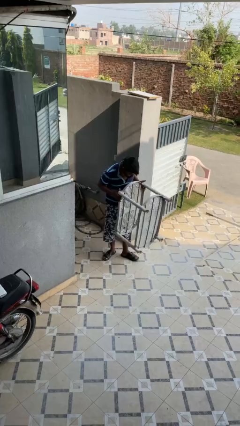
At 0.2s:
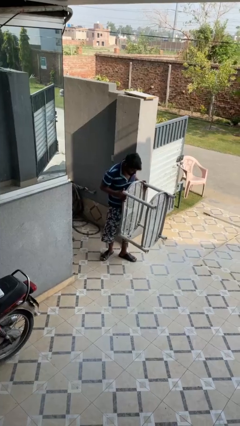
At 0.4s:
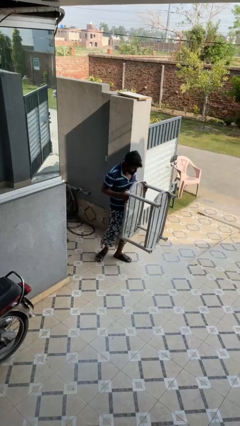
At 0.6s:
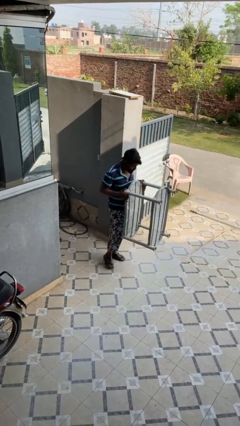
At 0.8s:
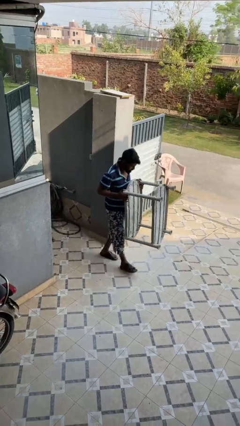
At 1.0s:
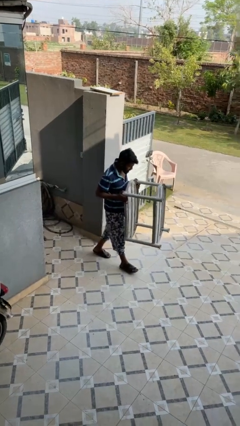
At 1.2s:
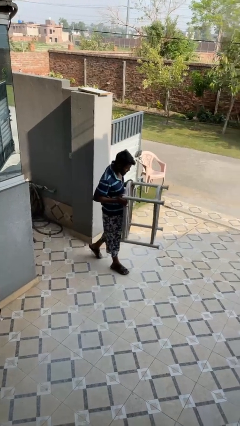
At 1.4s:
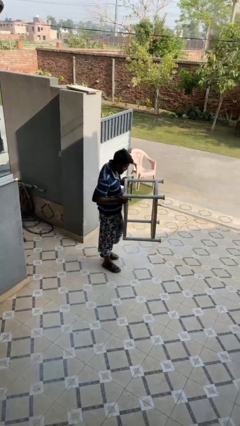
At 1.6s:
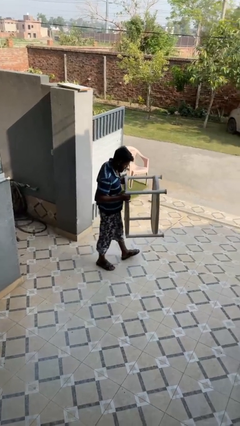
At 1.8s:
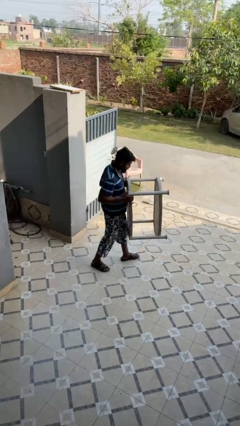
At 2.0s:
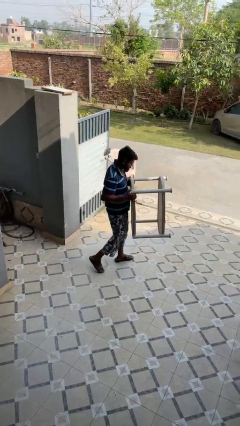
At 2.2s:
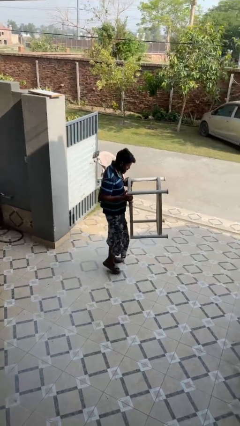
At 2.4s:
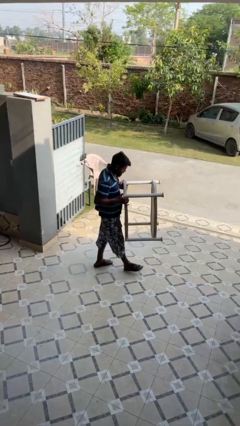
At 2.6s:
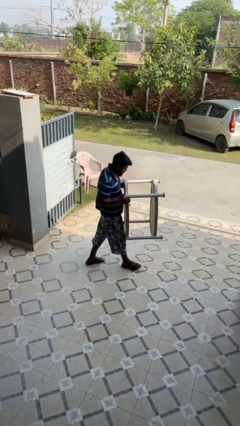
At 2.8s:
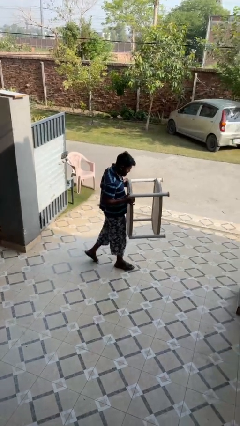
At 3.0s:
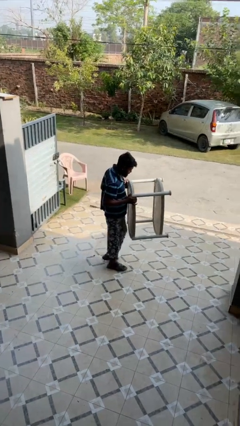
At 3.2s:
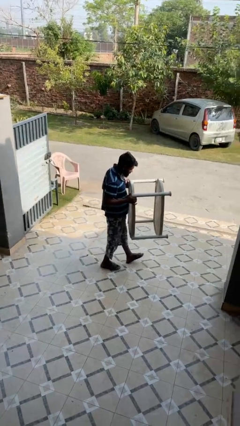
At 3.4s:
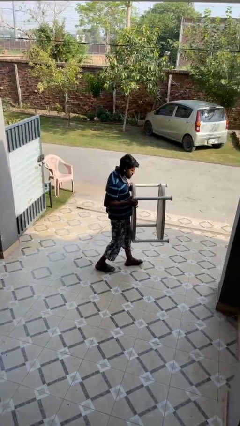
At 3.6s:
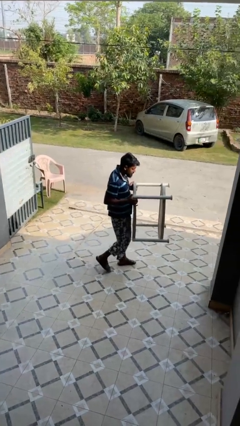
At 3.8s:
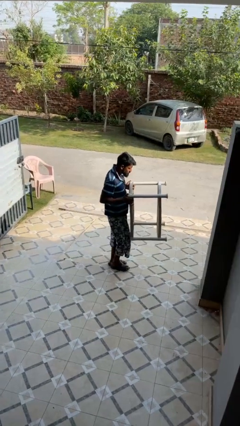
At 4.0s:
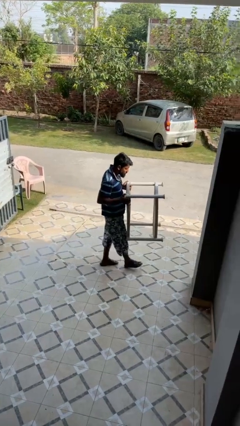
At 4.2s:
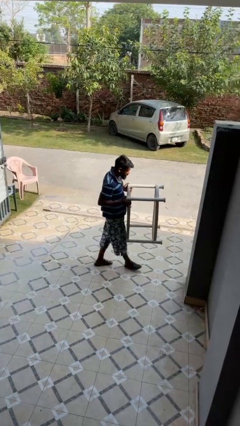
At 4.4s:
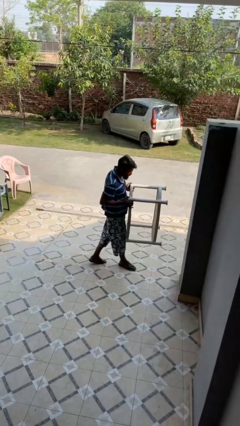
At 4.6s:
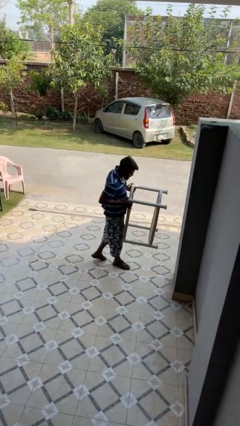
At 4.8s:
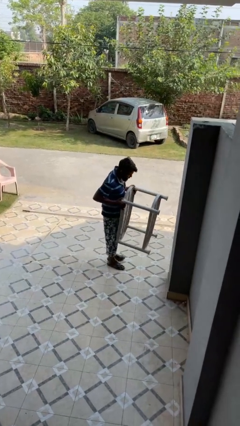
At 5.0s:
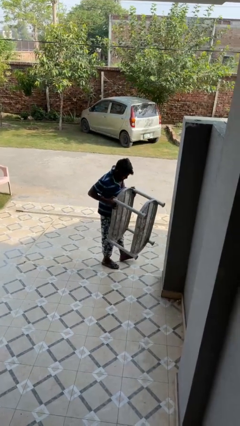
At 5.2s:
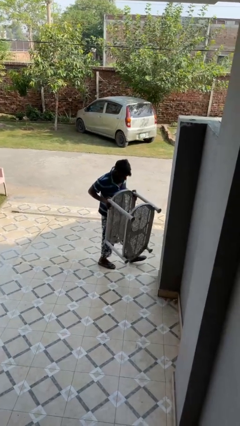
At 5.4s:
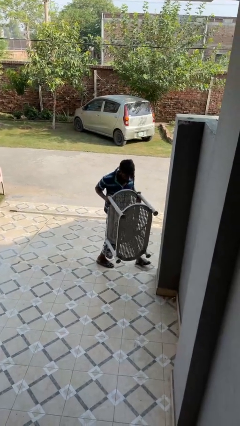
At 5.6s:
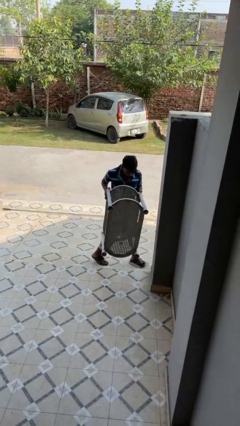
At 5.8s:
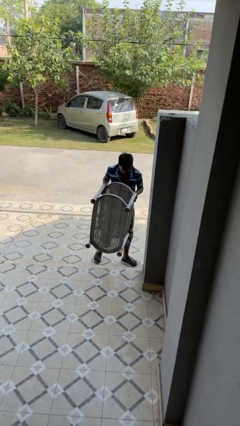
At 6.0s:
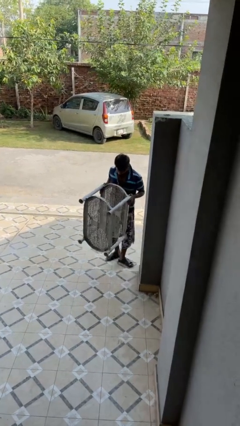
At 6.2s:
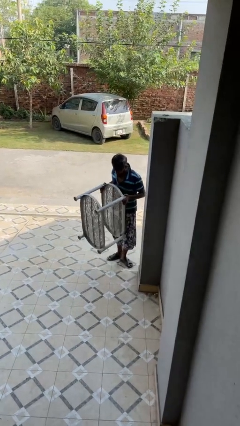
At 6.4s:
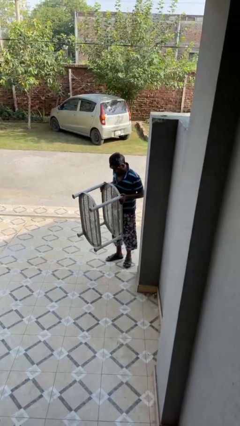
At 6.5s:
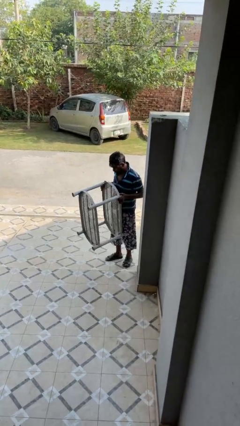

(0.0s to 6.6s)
person carries furniture

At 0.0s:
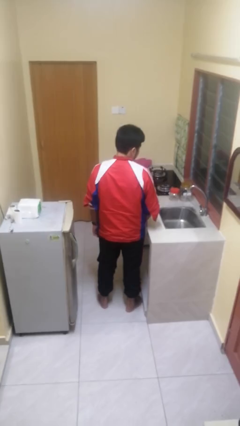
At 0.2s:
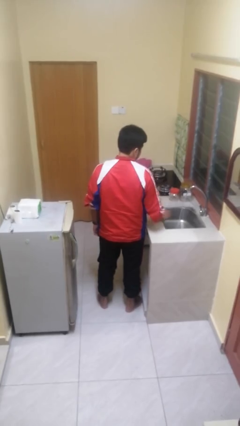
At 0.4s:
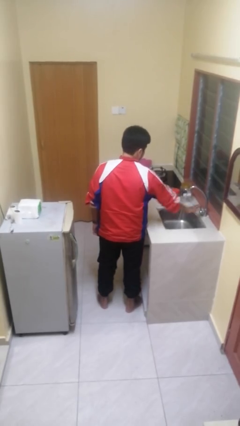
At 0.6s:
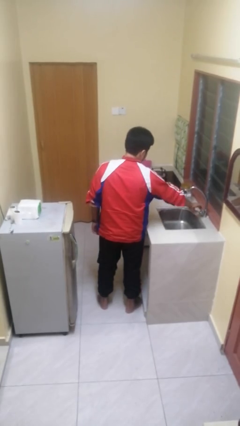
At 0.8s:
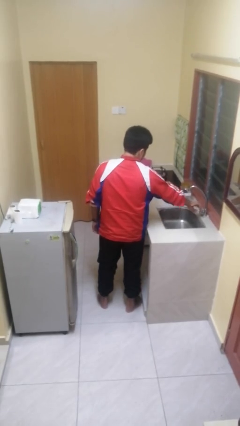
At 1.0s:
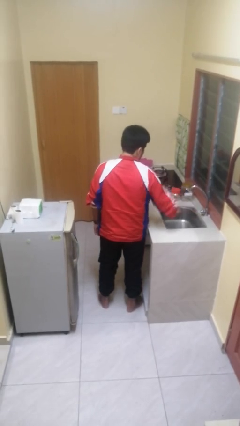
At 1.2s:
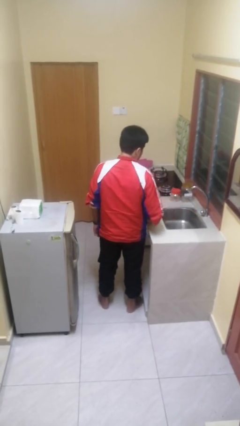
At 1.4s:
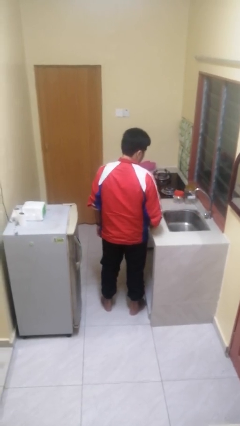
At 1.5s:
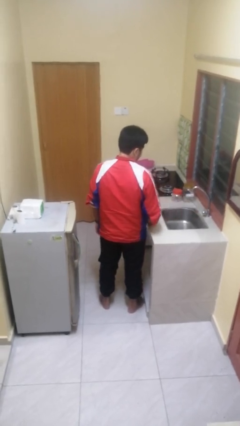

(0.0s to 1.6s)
person turns off faucet

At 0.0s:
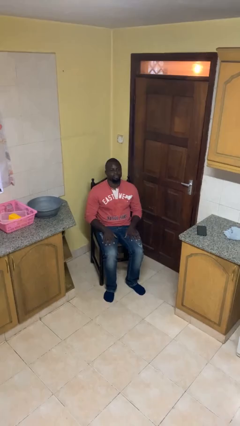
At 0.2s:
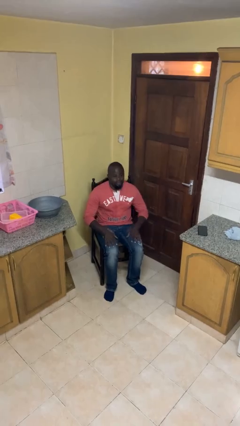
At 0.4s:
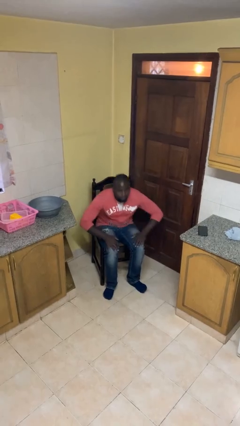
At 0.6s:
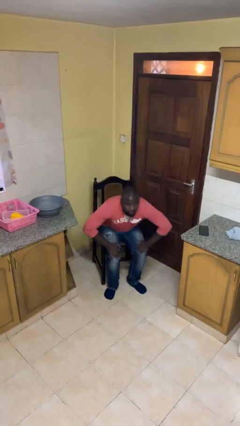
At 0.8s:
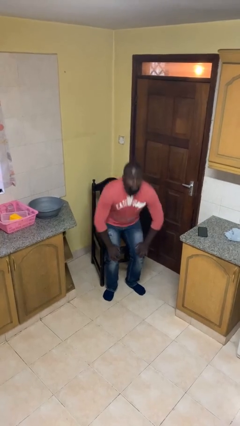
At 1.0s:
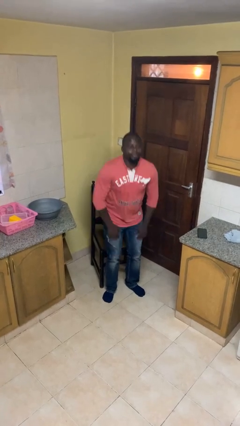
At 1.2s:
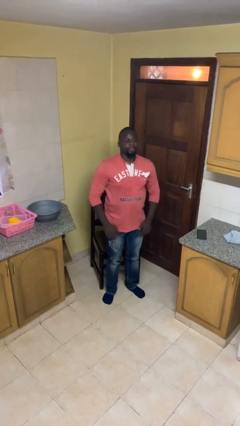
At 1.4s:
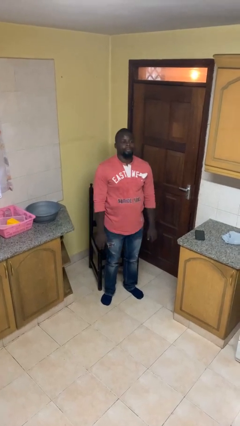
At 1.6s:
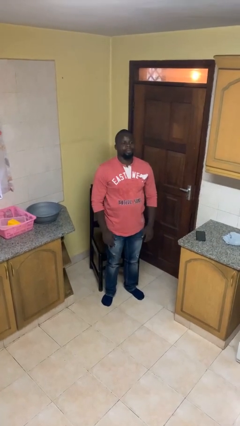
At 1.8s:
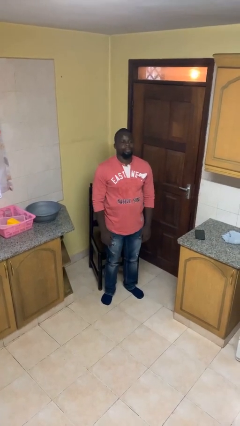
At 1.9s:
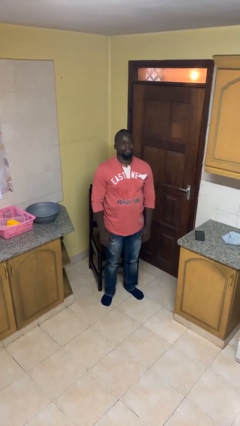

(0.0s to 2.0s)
person stands up

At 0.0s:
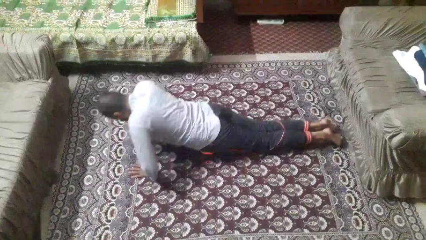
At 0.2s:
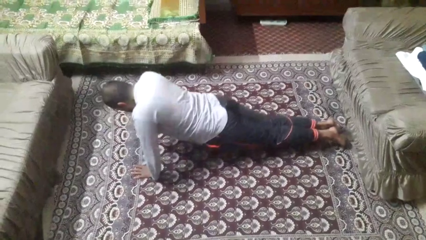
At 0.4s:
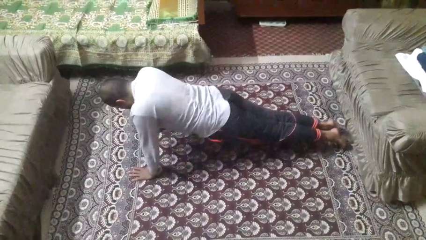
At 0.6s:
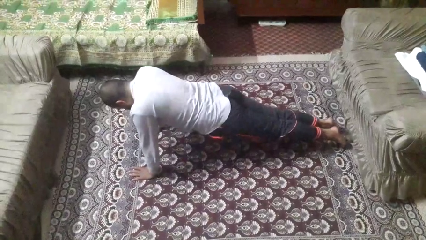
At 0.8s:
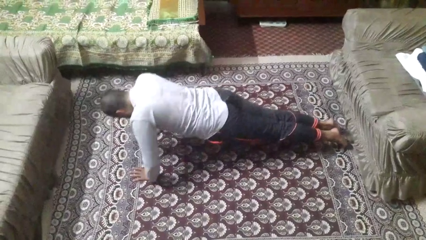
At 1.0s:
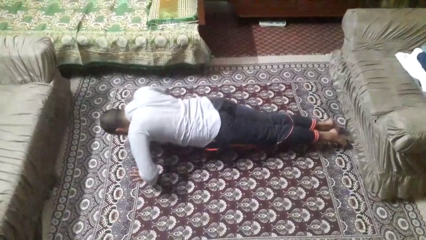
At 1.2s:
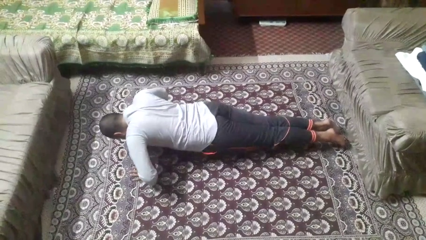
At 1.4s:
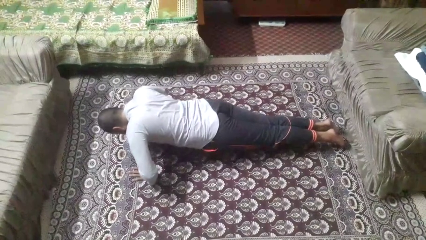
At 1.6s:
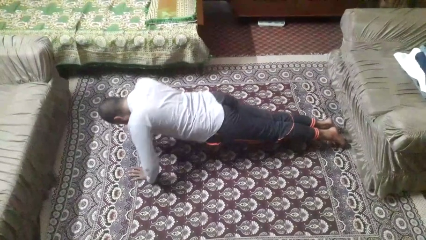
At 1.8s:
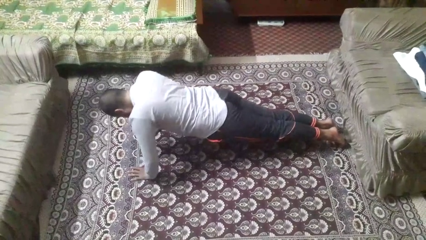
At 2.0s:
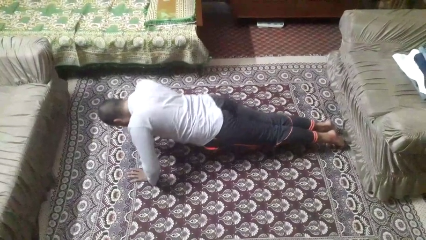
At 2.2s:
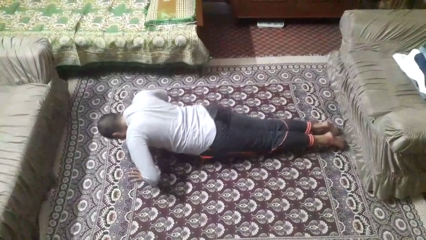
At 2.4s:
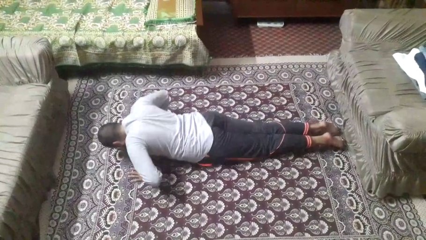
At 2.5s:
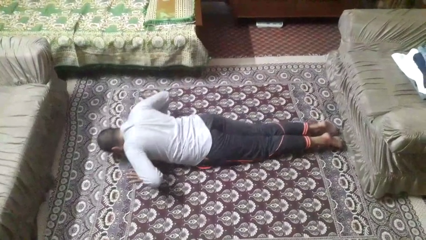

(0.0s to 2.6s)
person exercises with pushup

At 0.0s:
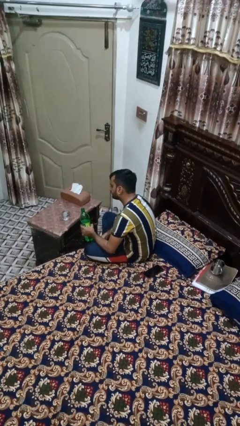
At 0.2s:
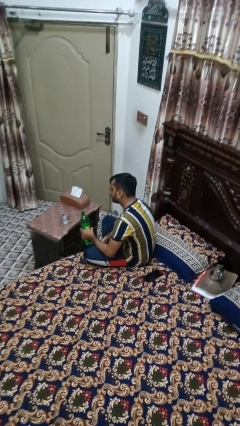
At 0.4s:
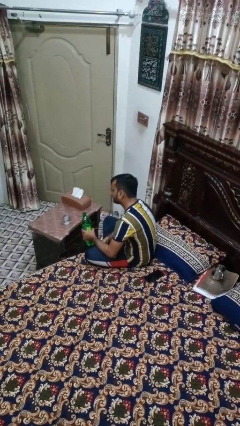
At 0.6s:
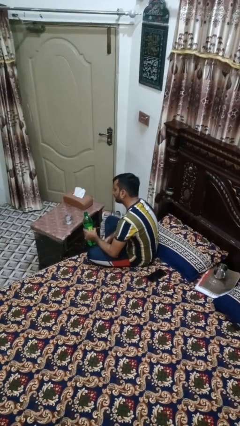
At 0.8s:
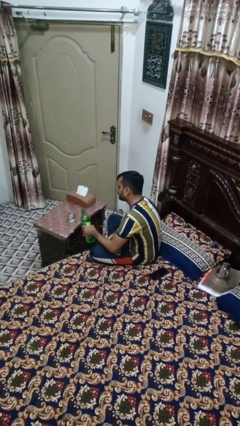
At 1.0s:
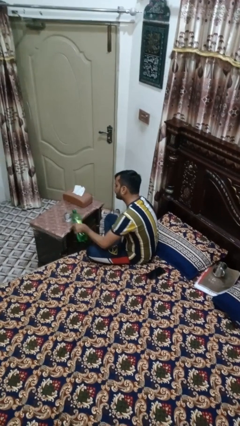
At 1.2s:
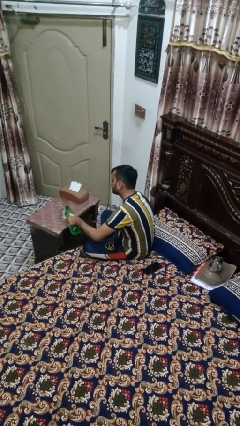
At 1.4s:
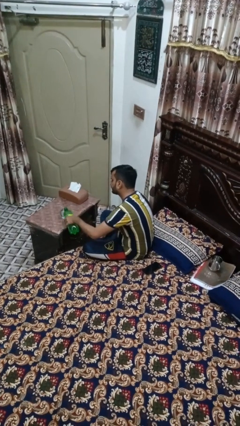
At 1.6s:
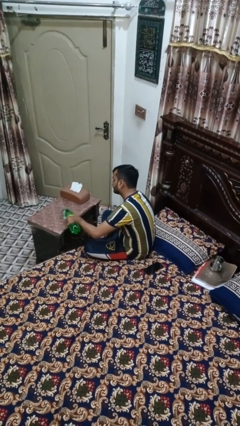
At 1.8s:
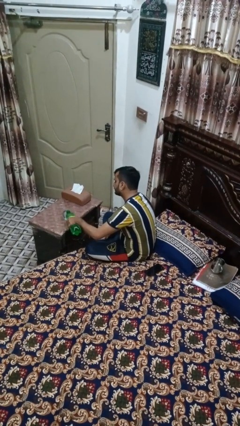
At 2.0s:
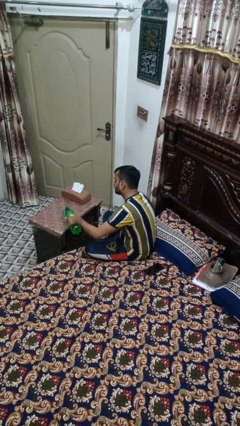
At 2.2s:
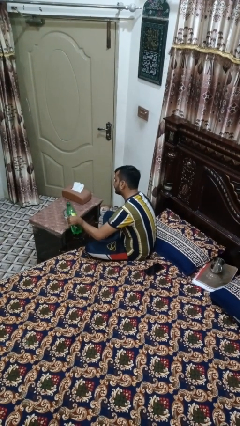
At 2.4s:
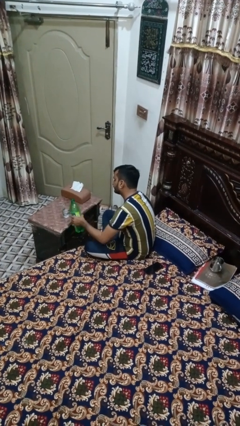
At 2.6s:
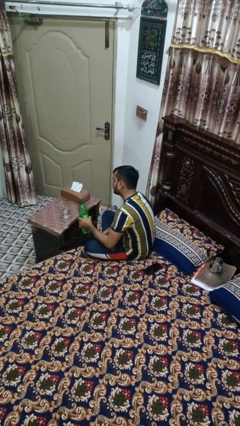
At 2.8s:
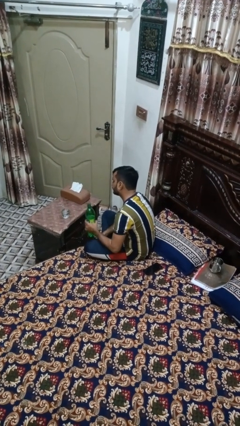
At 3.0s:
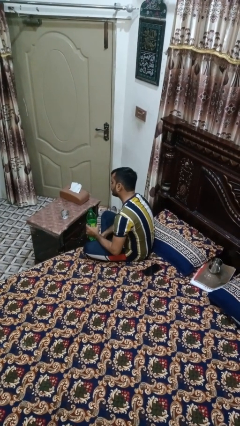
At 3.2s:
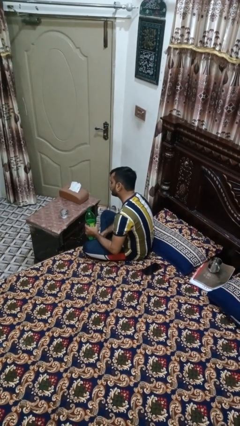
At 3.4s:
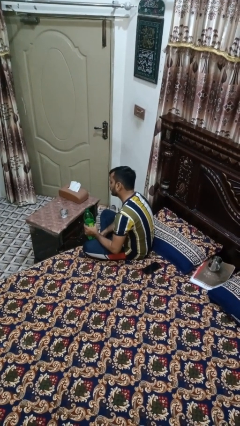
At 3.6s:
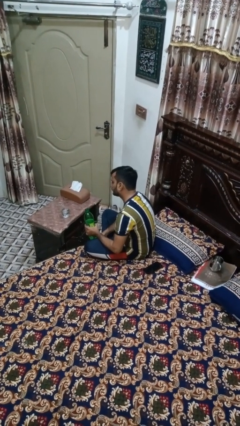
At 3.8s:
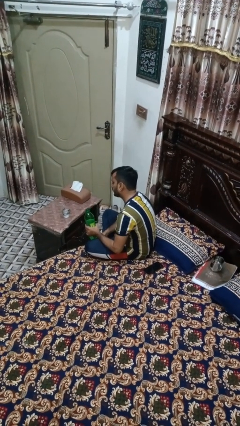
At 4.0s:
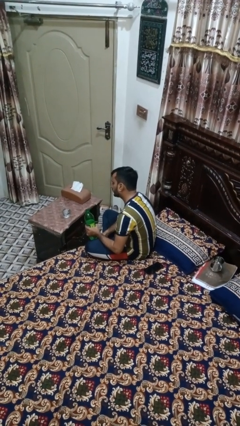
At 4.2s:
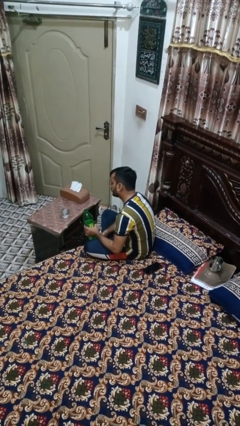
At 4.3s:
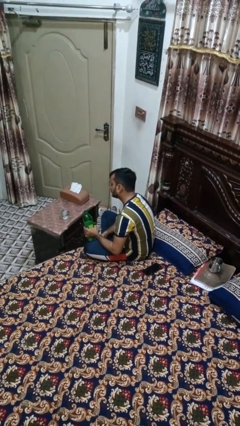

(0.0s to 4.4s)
person pours liquid into cup

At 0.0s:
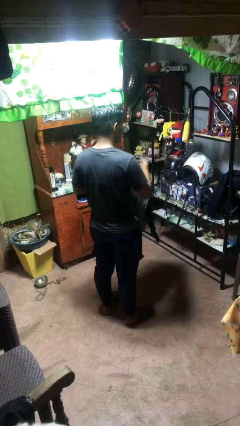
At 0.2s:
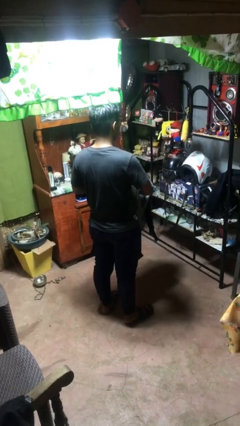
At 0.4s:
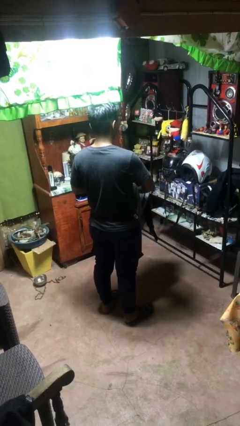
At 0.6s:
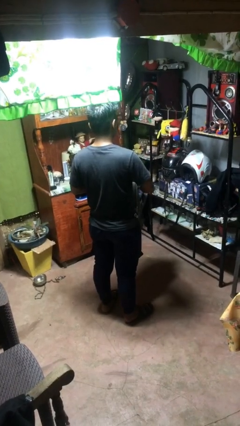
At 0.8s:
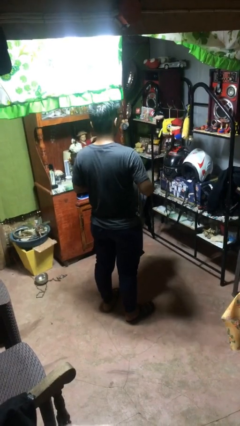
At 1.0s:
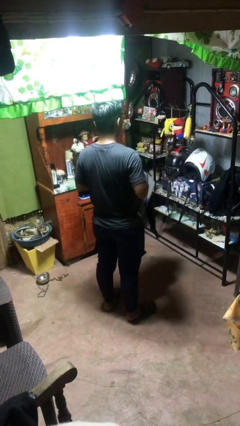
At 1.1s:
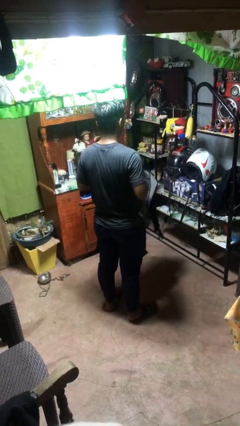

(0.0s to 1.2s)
person puts object into bag
